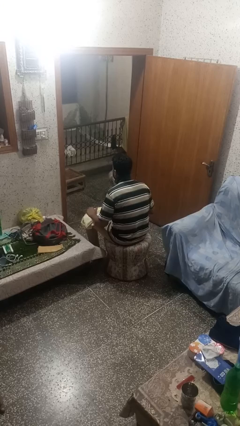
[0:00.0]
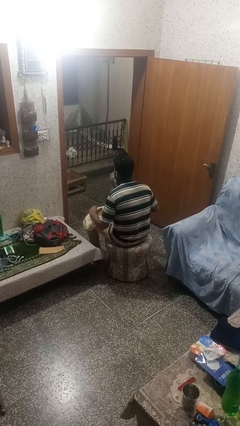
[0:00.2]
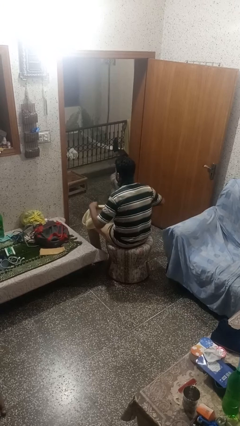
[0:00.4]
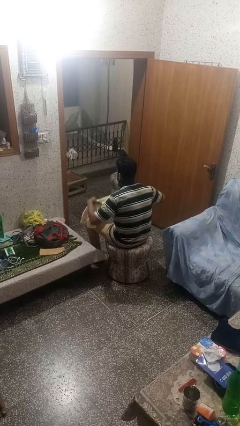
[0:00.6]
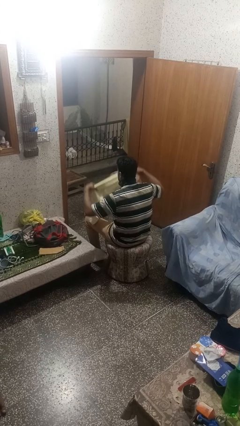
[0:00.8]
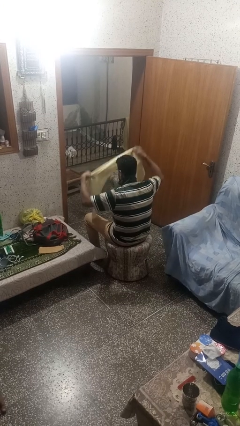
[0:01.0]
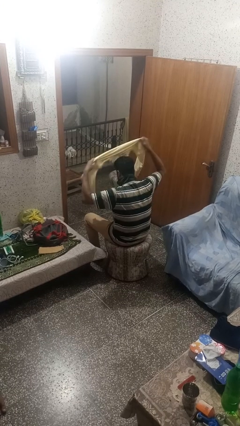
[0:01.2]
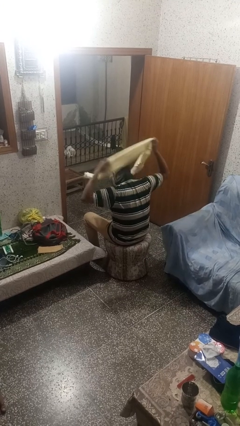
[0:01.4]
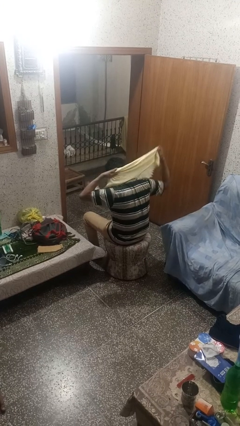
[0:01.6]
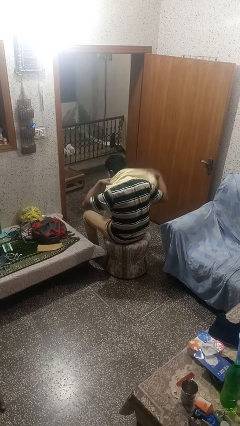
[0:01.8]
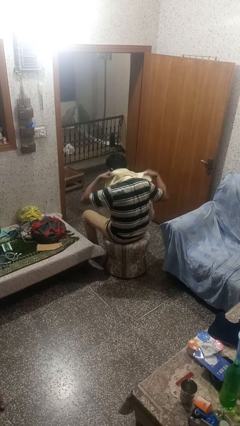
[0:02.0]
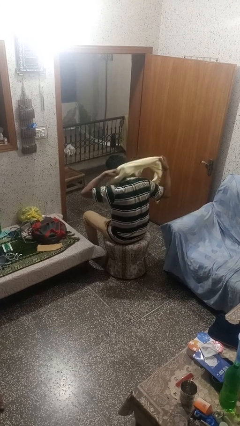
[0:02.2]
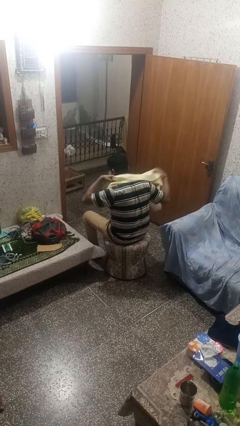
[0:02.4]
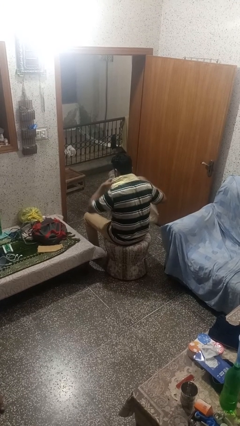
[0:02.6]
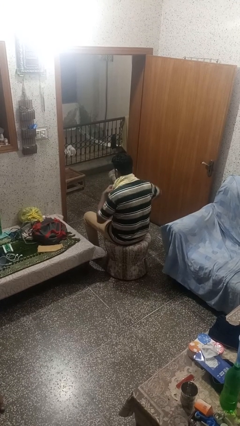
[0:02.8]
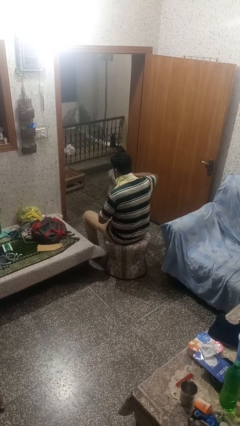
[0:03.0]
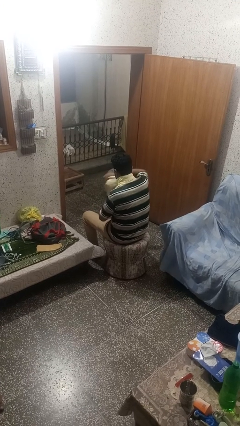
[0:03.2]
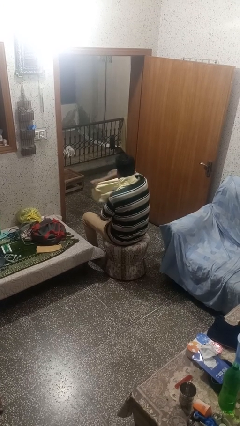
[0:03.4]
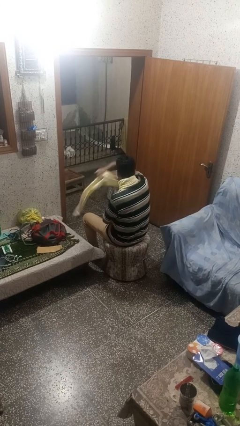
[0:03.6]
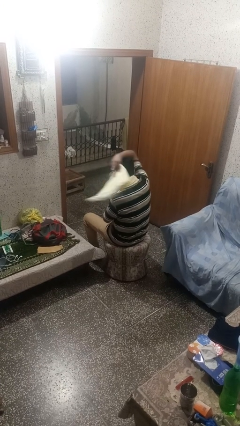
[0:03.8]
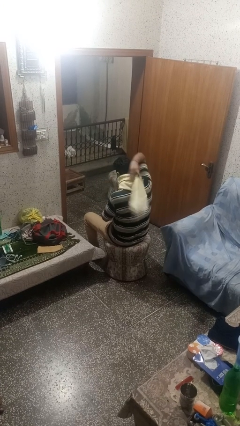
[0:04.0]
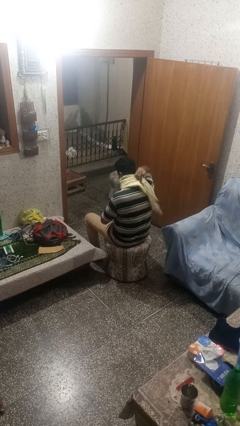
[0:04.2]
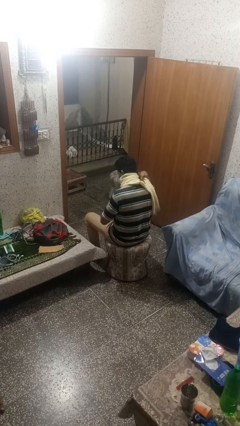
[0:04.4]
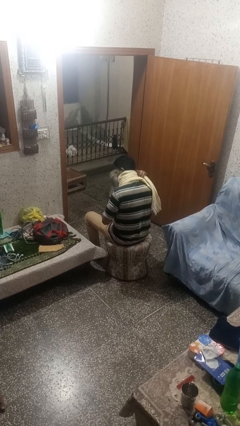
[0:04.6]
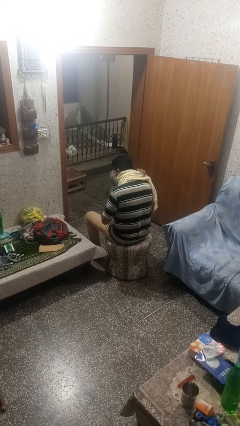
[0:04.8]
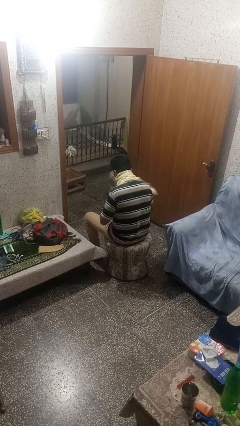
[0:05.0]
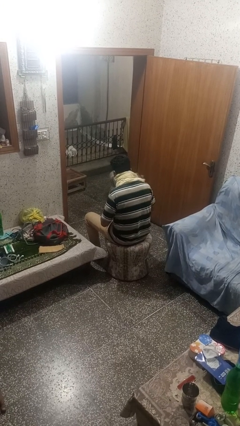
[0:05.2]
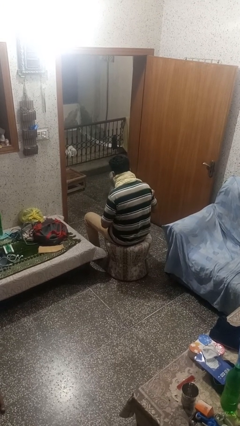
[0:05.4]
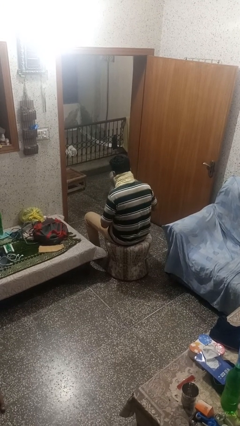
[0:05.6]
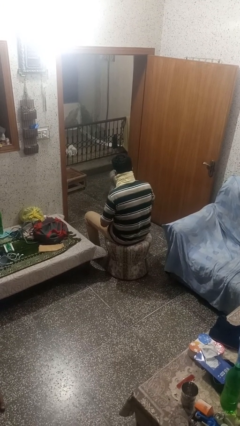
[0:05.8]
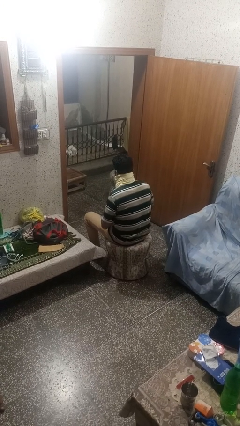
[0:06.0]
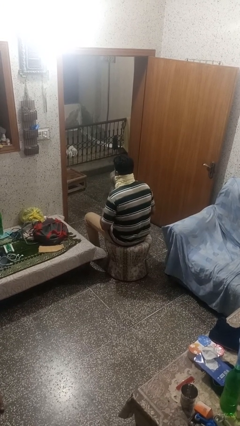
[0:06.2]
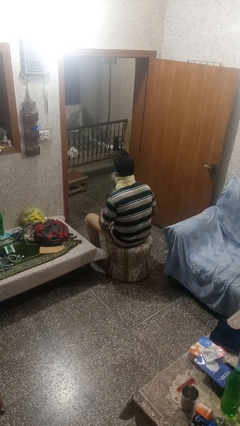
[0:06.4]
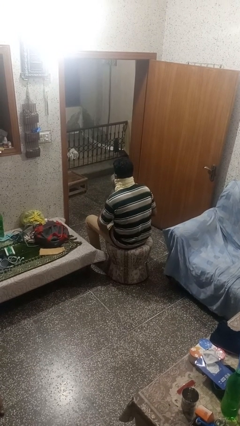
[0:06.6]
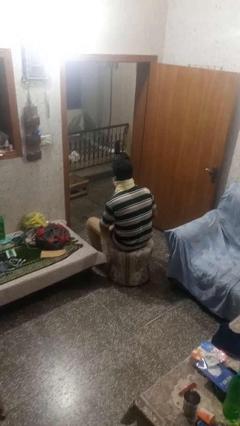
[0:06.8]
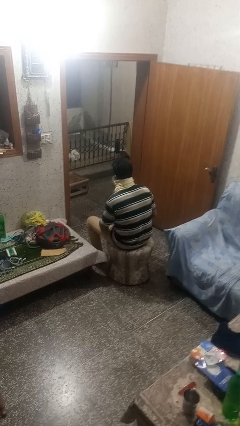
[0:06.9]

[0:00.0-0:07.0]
person puts on scarf

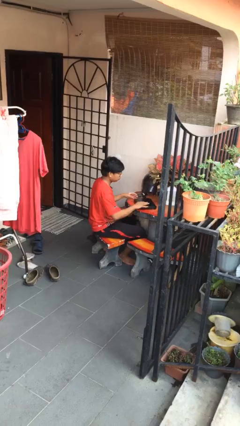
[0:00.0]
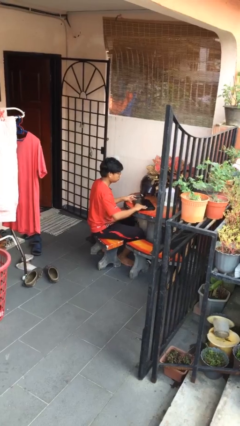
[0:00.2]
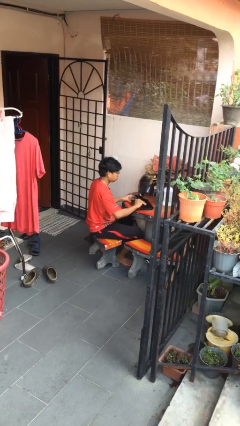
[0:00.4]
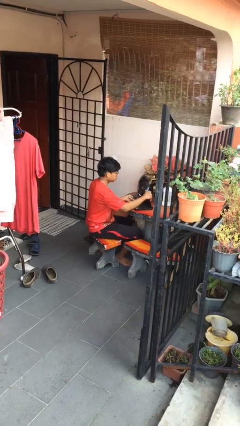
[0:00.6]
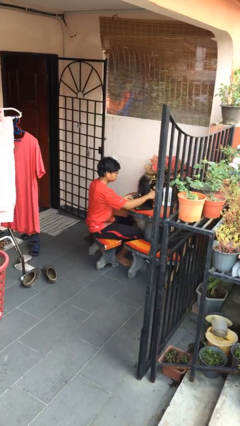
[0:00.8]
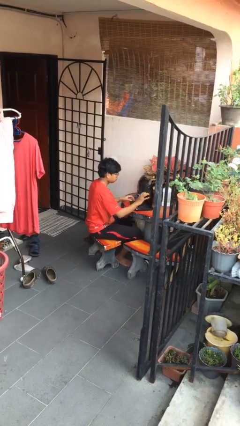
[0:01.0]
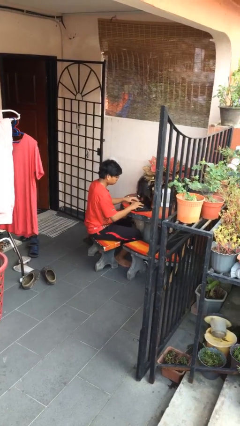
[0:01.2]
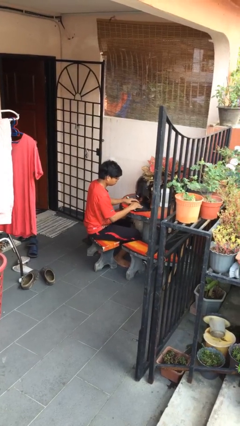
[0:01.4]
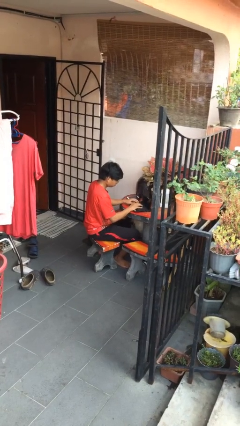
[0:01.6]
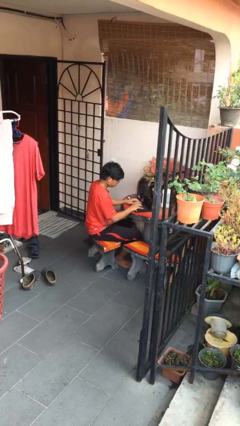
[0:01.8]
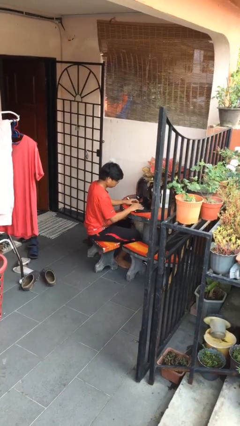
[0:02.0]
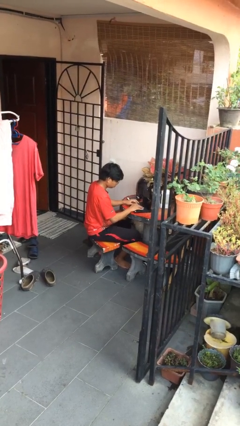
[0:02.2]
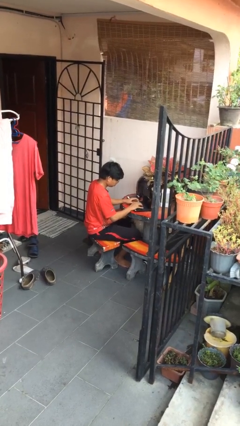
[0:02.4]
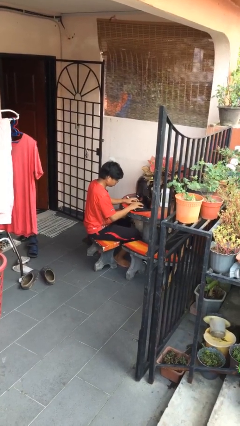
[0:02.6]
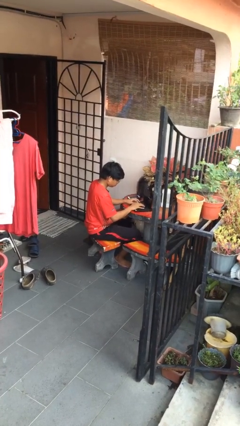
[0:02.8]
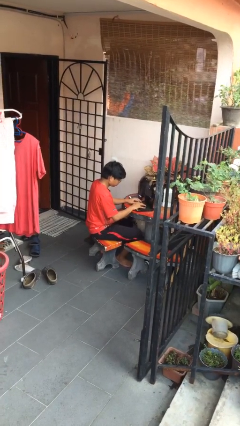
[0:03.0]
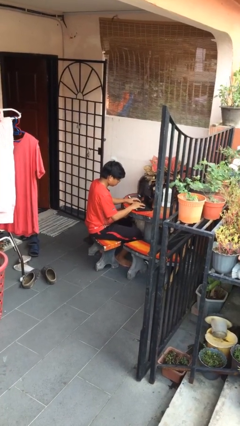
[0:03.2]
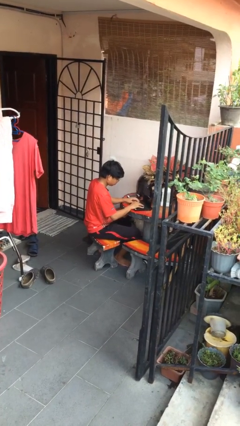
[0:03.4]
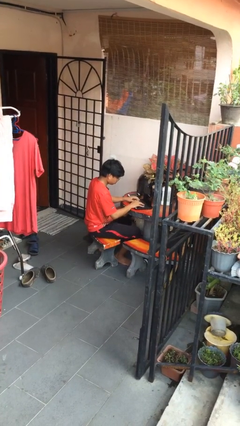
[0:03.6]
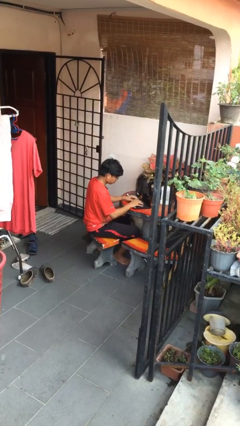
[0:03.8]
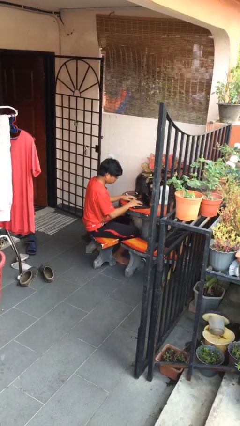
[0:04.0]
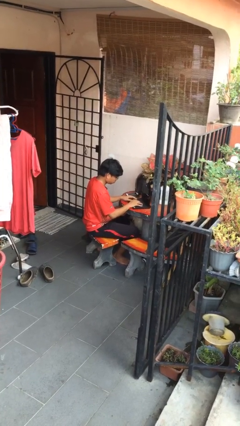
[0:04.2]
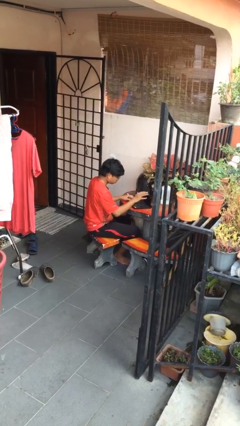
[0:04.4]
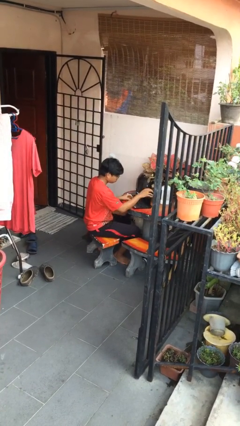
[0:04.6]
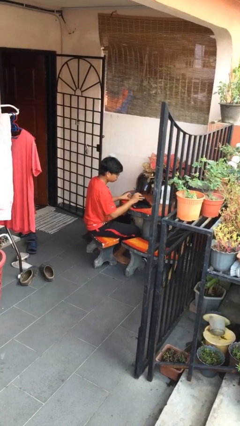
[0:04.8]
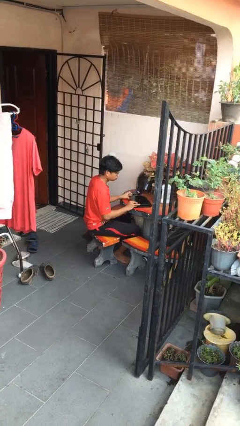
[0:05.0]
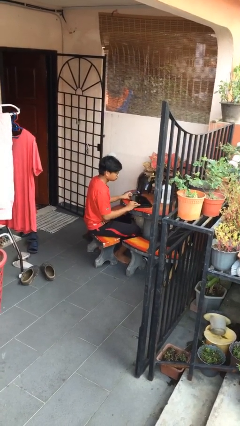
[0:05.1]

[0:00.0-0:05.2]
person interacts with laptop

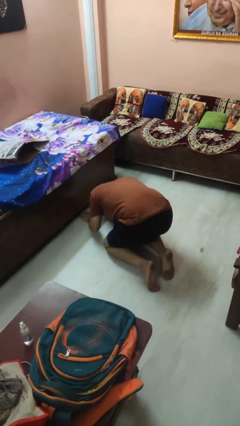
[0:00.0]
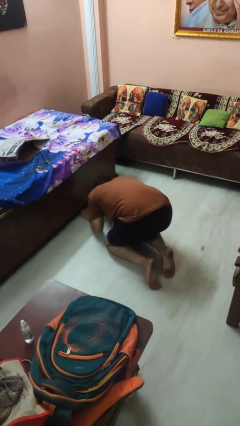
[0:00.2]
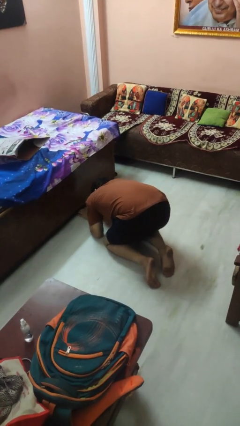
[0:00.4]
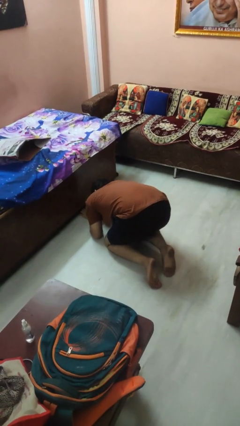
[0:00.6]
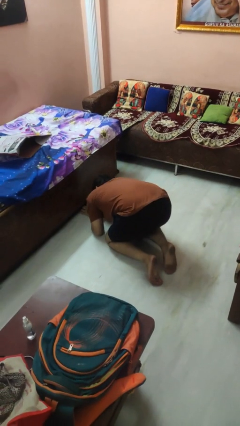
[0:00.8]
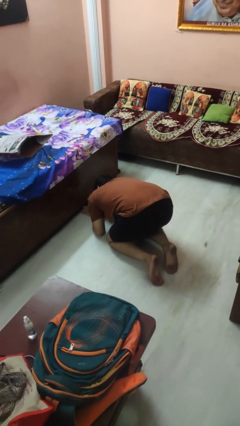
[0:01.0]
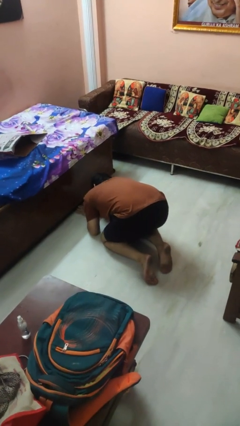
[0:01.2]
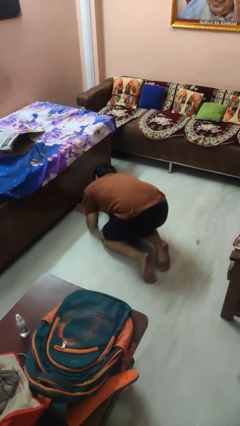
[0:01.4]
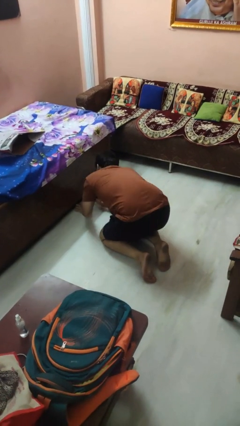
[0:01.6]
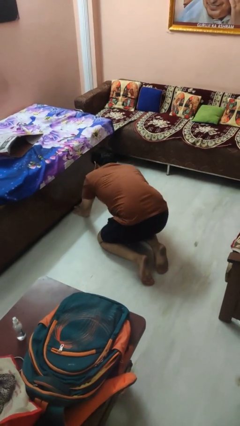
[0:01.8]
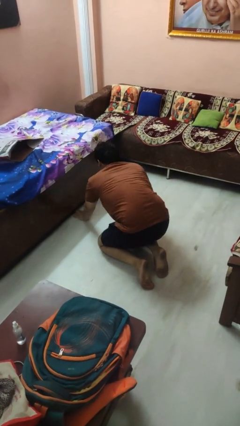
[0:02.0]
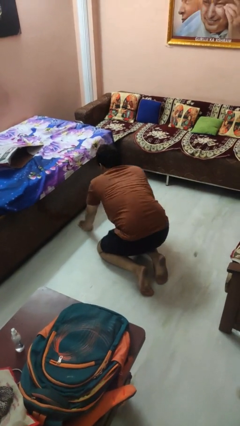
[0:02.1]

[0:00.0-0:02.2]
person searches under bed

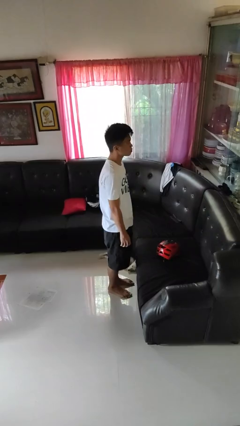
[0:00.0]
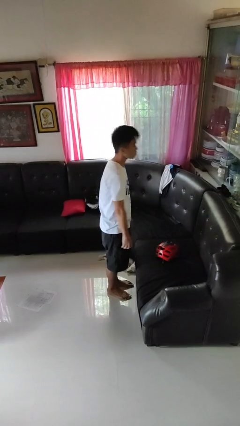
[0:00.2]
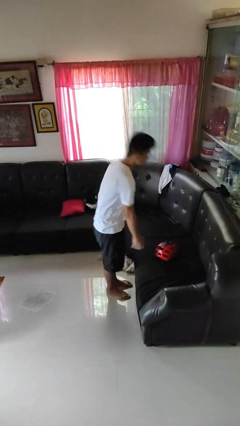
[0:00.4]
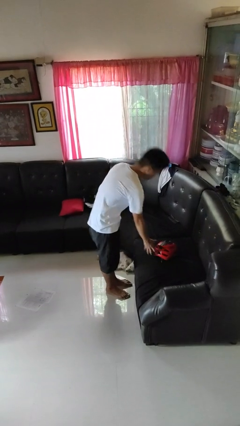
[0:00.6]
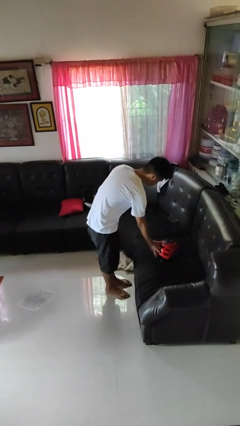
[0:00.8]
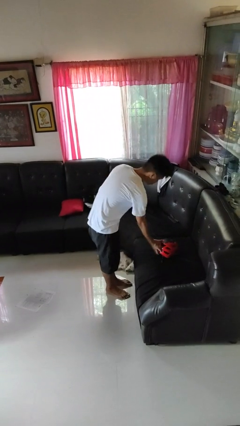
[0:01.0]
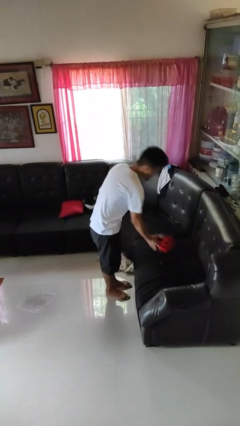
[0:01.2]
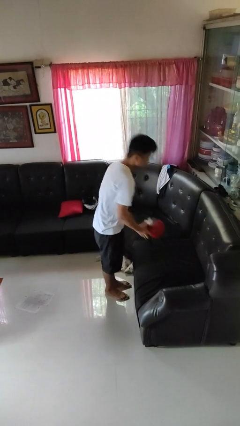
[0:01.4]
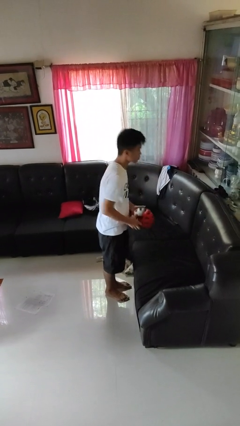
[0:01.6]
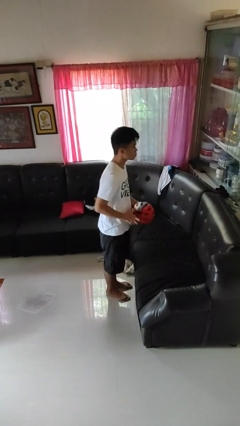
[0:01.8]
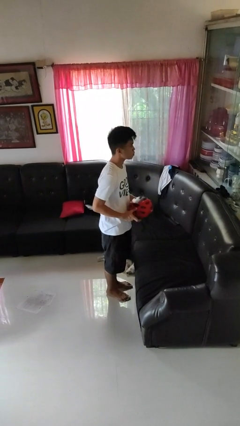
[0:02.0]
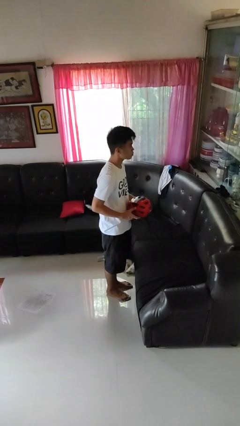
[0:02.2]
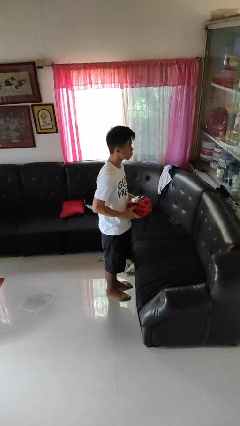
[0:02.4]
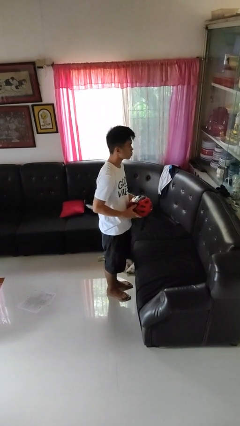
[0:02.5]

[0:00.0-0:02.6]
person picks up object from couch

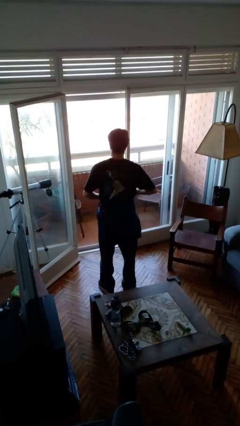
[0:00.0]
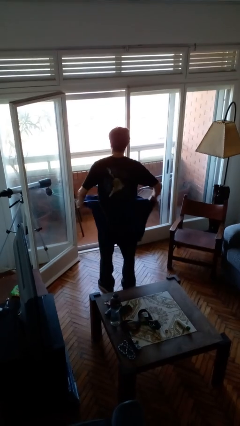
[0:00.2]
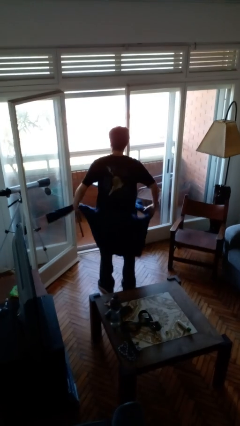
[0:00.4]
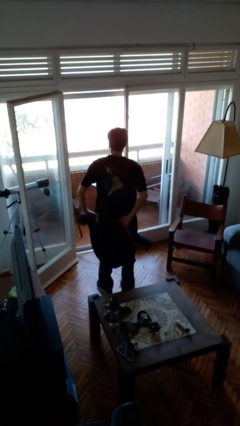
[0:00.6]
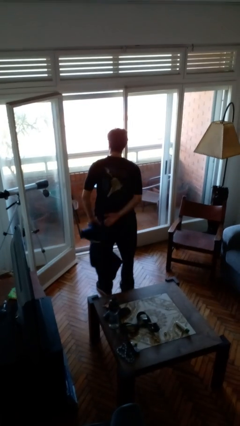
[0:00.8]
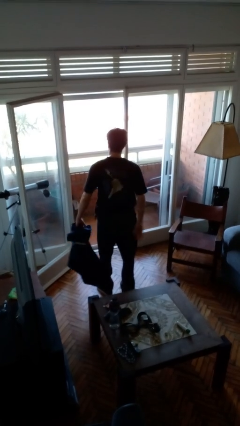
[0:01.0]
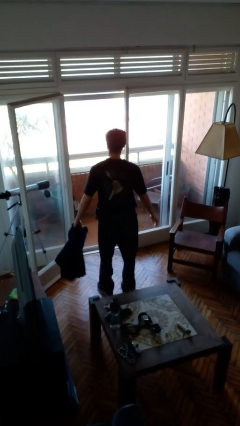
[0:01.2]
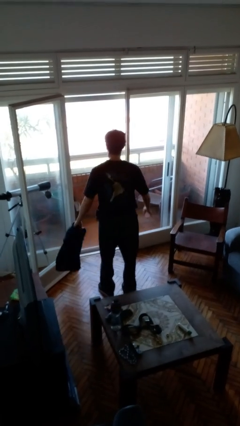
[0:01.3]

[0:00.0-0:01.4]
person unties jacket around waist
